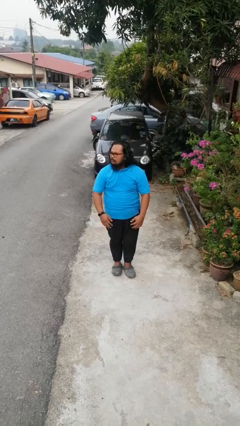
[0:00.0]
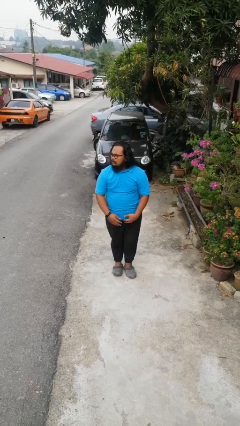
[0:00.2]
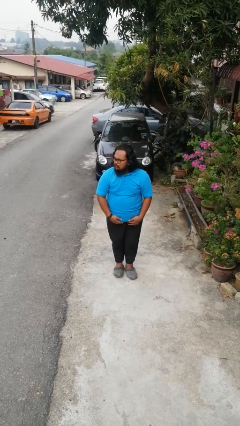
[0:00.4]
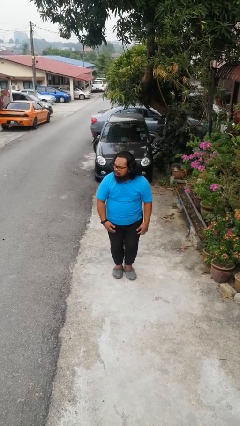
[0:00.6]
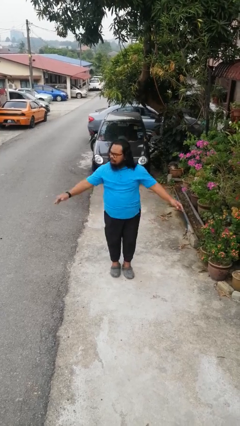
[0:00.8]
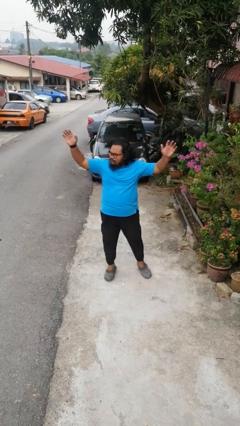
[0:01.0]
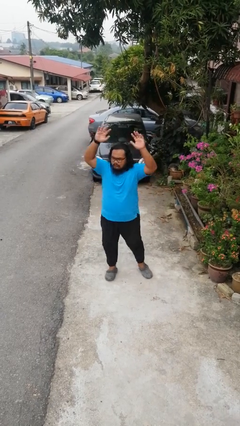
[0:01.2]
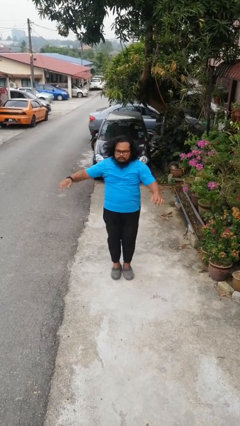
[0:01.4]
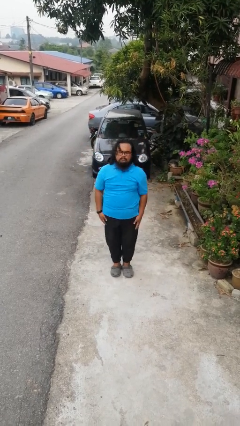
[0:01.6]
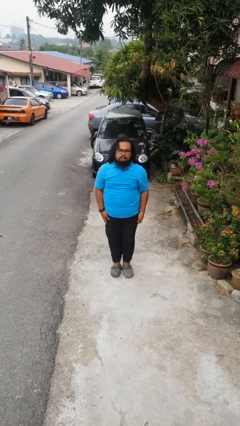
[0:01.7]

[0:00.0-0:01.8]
person exercises with jumping jacks

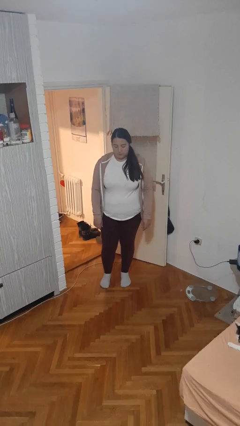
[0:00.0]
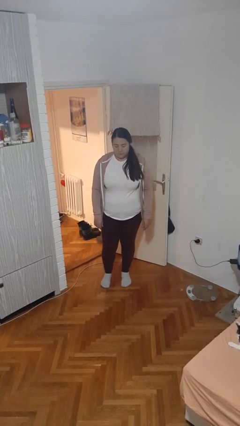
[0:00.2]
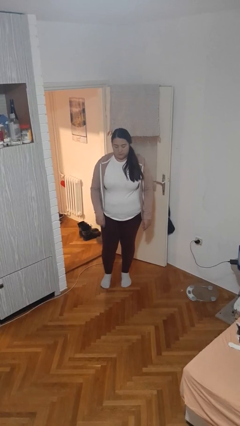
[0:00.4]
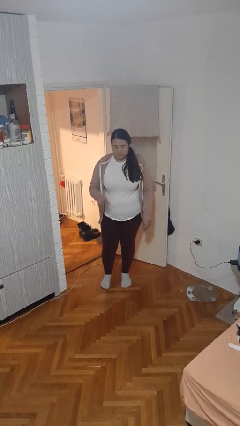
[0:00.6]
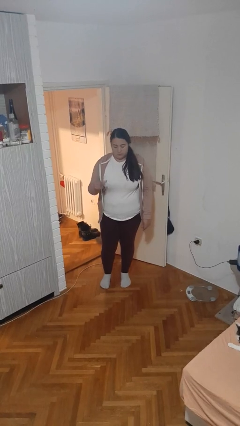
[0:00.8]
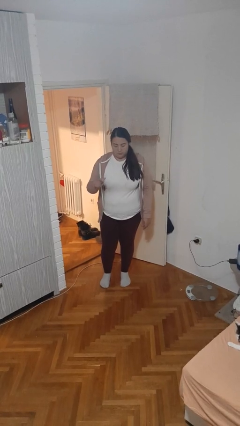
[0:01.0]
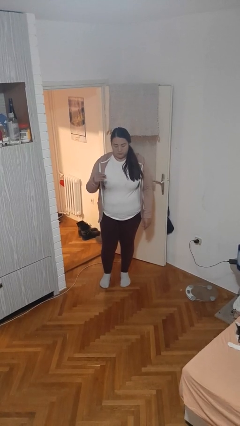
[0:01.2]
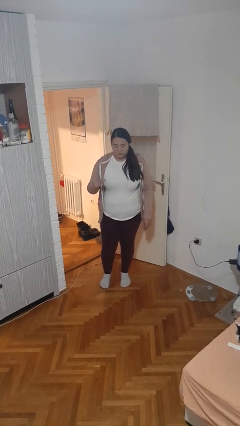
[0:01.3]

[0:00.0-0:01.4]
person snaps fingers

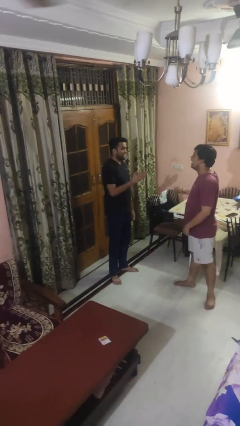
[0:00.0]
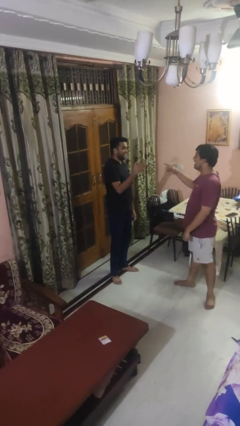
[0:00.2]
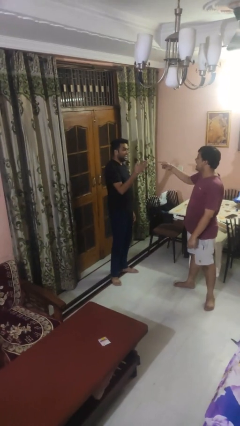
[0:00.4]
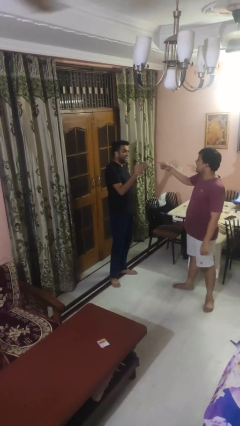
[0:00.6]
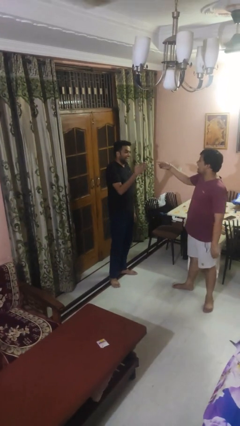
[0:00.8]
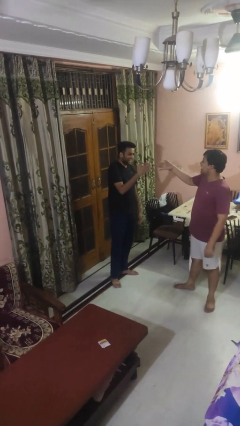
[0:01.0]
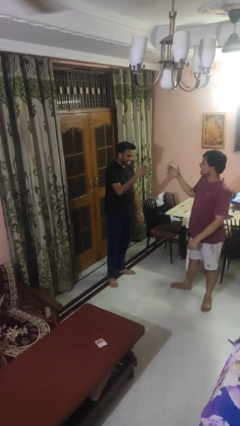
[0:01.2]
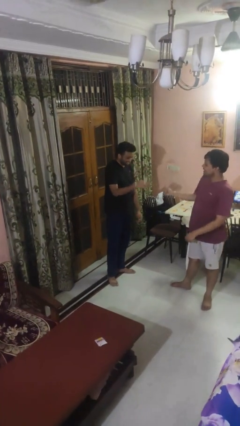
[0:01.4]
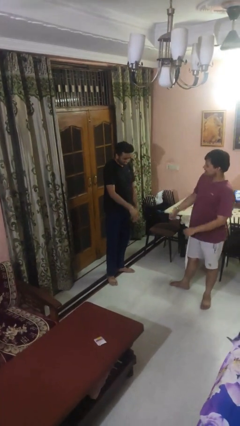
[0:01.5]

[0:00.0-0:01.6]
person laughs with person

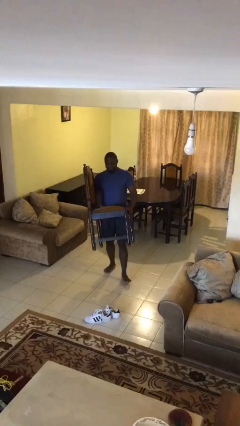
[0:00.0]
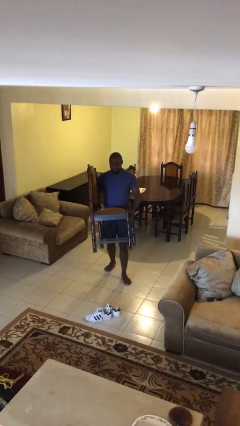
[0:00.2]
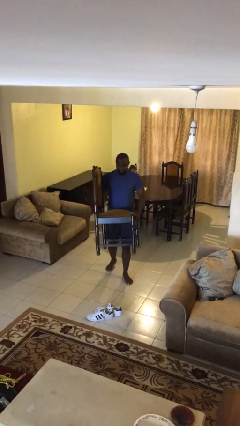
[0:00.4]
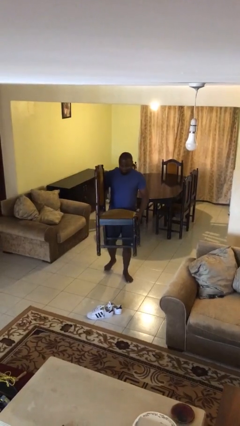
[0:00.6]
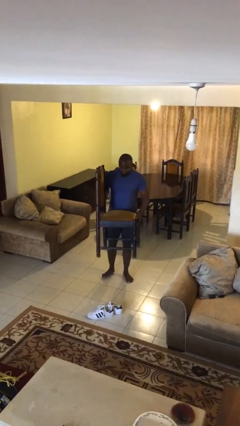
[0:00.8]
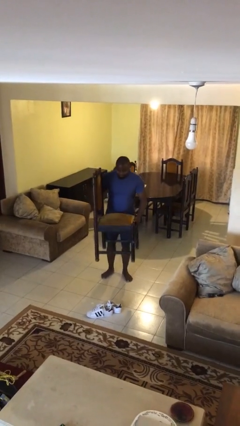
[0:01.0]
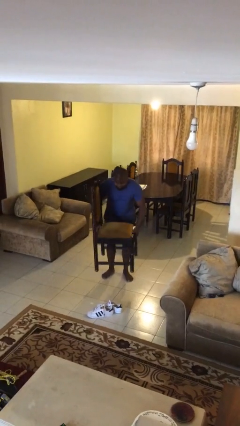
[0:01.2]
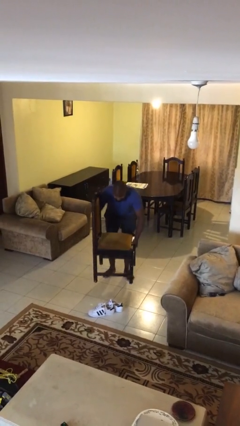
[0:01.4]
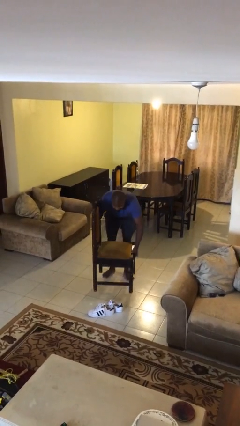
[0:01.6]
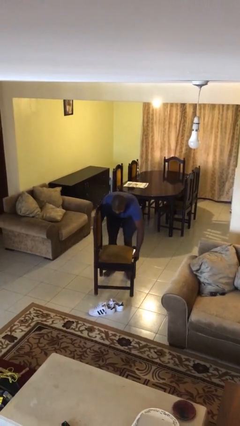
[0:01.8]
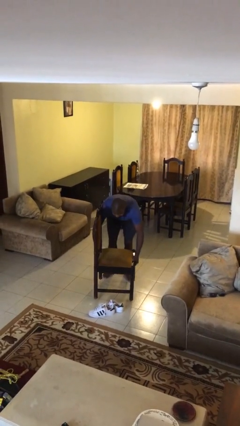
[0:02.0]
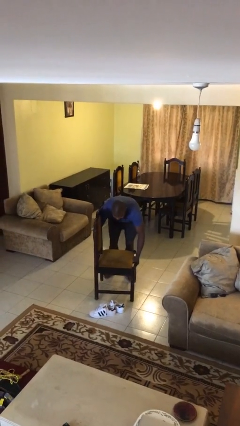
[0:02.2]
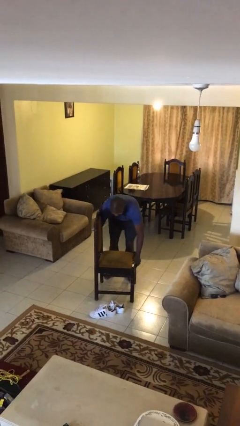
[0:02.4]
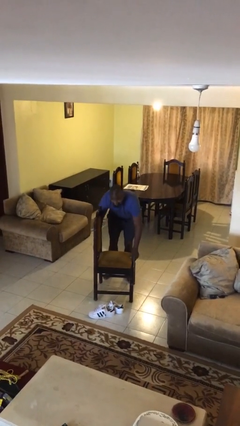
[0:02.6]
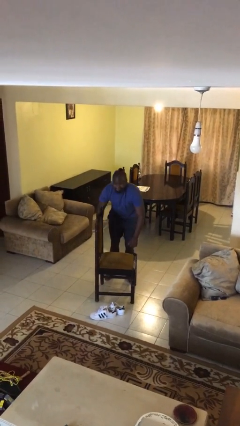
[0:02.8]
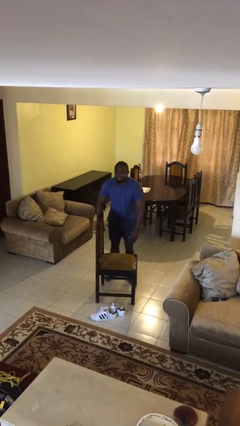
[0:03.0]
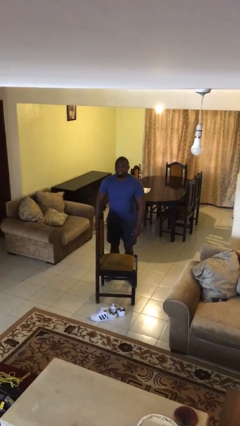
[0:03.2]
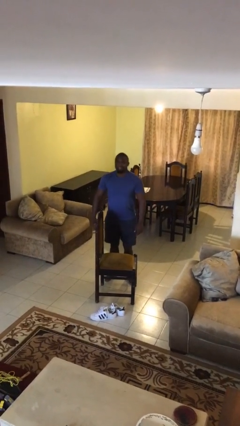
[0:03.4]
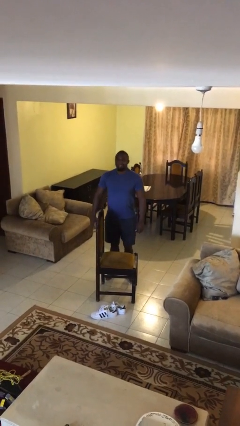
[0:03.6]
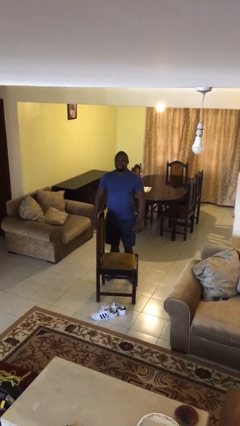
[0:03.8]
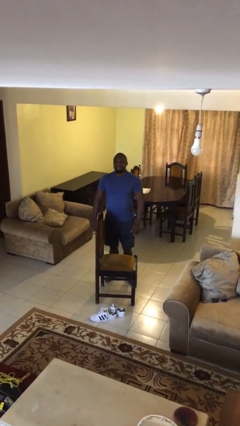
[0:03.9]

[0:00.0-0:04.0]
person puts down object on floor

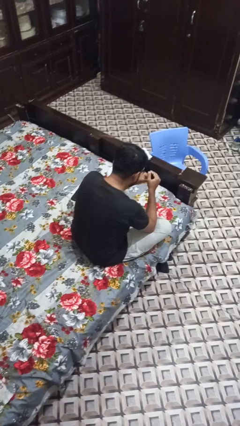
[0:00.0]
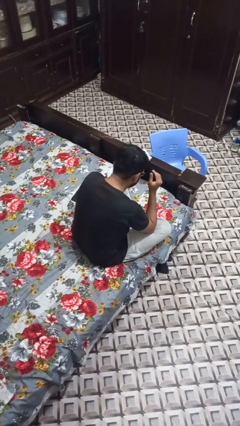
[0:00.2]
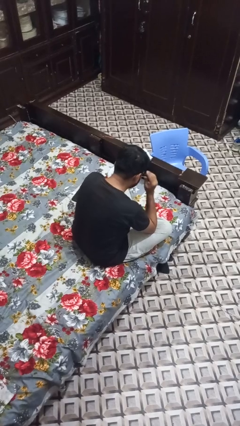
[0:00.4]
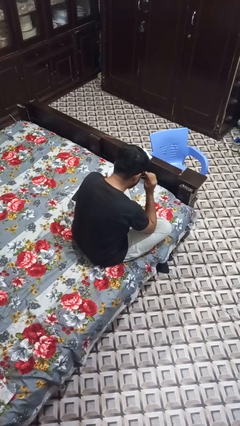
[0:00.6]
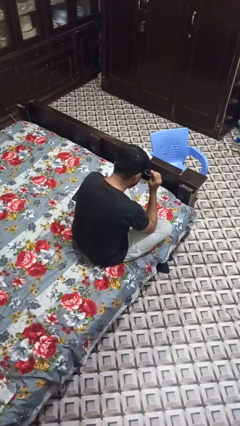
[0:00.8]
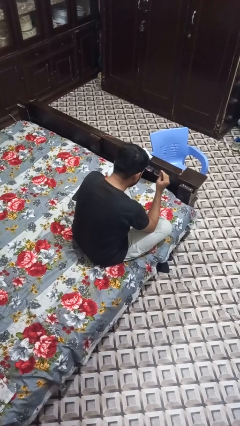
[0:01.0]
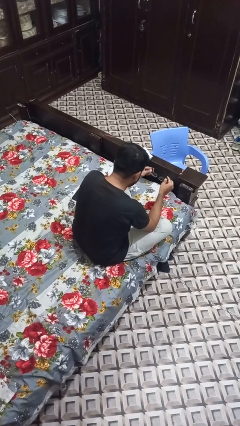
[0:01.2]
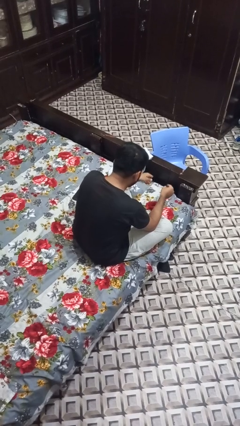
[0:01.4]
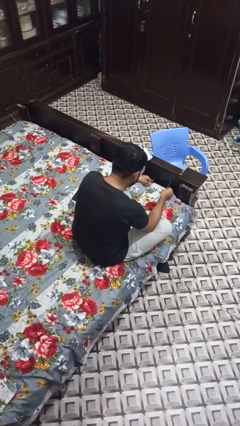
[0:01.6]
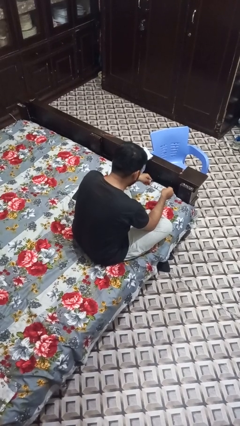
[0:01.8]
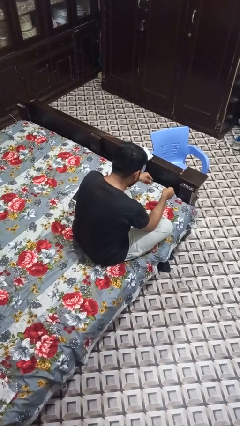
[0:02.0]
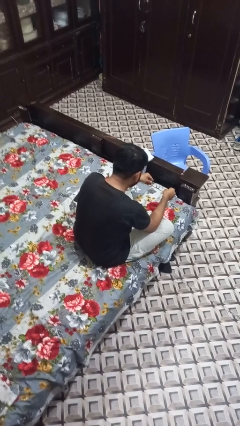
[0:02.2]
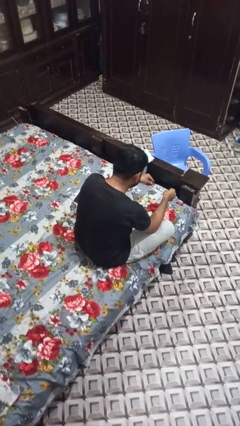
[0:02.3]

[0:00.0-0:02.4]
person takes off glasses

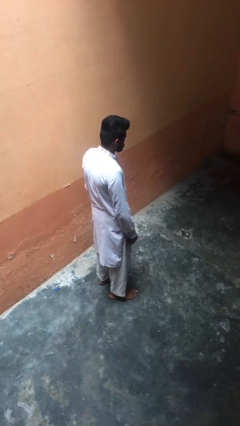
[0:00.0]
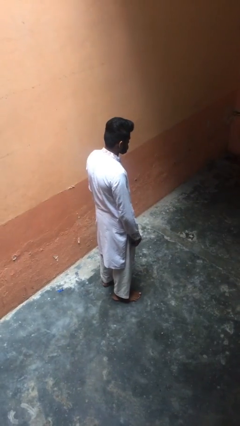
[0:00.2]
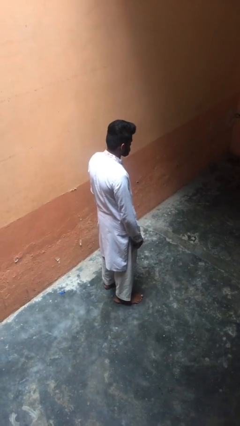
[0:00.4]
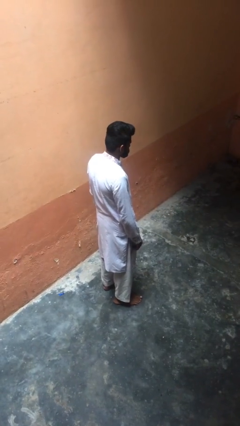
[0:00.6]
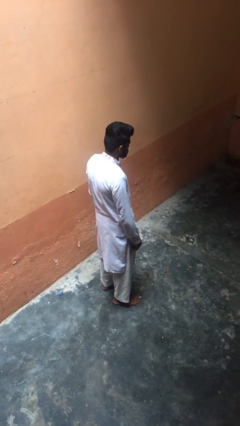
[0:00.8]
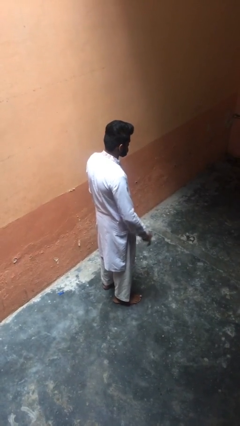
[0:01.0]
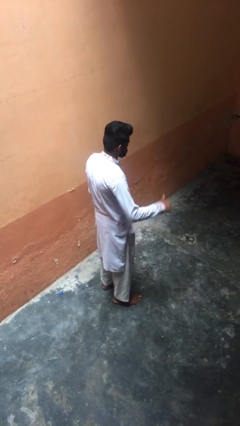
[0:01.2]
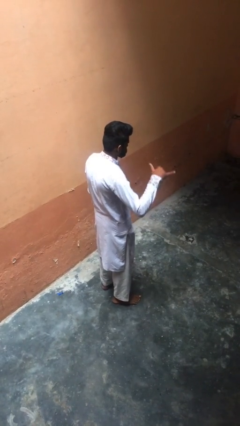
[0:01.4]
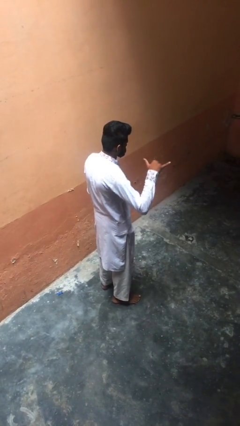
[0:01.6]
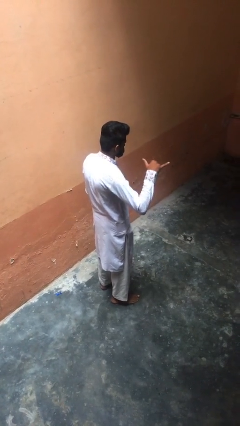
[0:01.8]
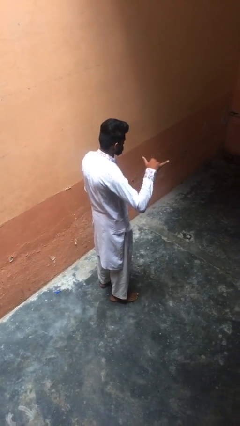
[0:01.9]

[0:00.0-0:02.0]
person gestures hang loose

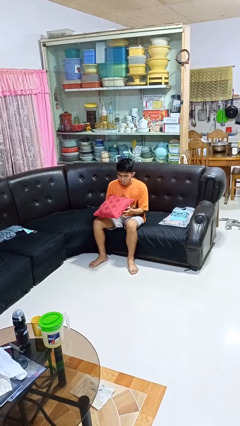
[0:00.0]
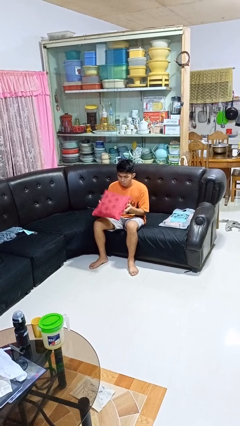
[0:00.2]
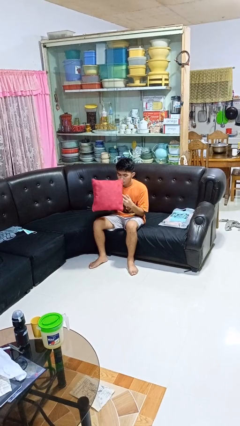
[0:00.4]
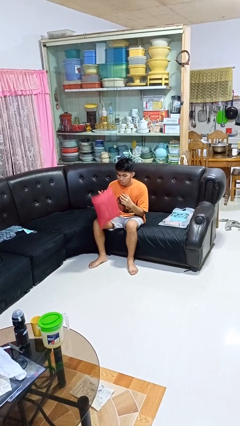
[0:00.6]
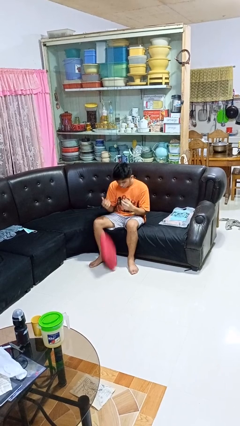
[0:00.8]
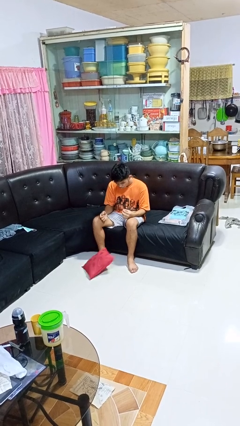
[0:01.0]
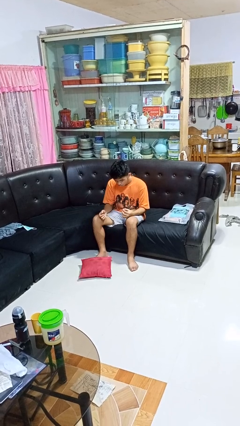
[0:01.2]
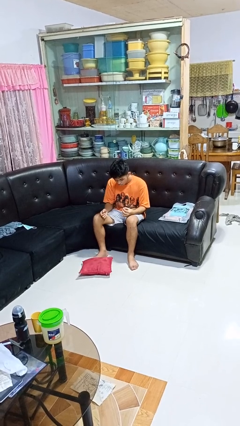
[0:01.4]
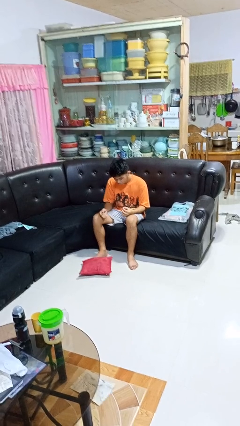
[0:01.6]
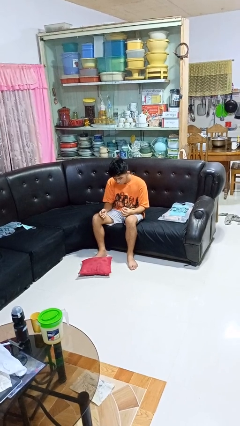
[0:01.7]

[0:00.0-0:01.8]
person drops object

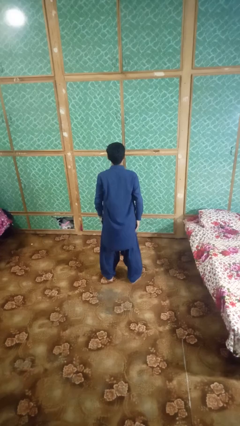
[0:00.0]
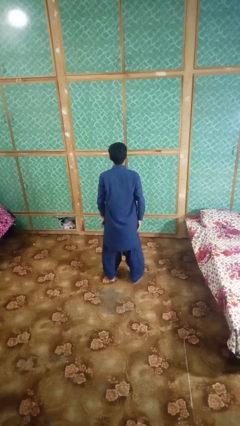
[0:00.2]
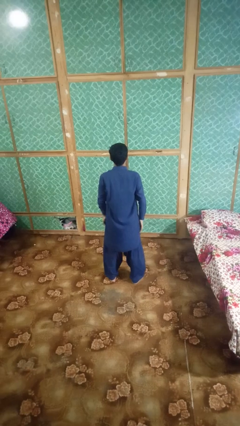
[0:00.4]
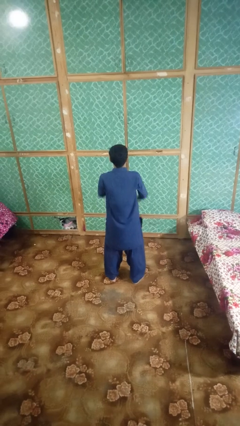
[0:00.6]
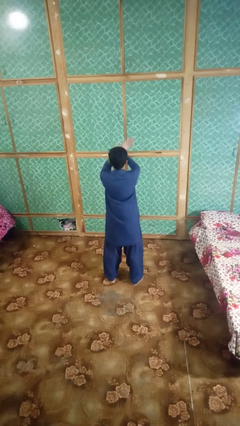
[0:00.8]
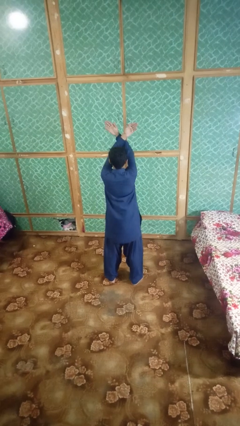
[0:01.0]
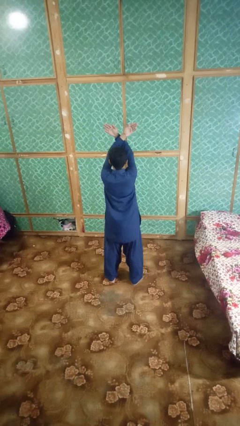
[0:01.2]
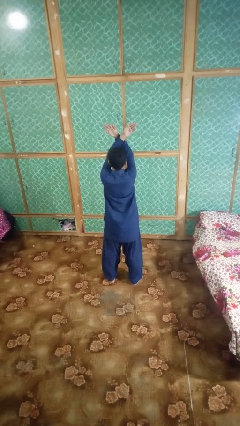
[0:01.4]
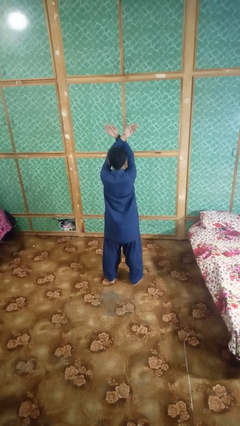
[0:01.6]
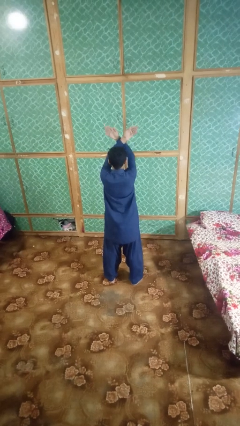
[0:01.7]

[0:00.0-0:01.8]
person gestures arms x
